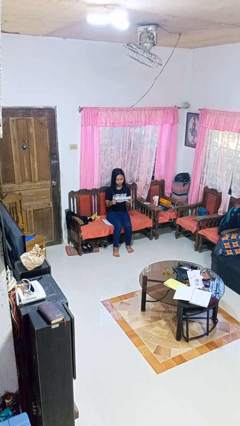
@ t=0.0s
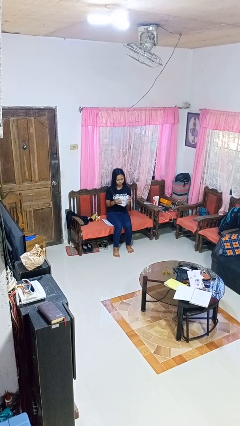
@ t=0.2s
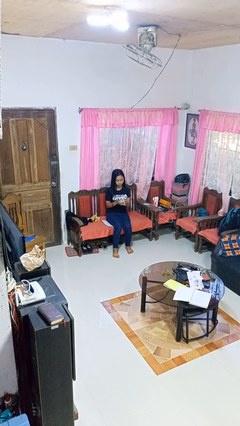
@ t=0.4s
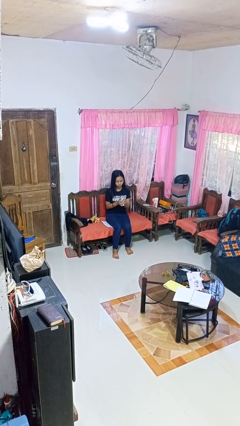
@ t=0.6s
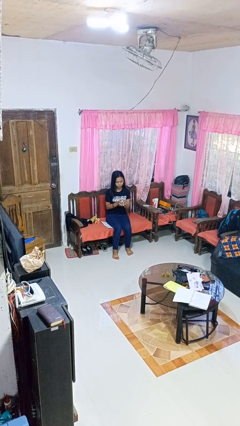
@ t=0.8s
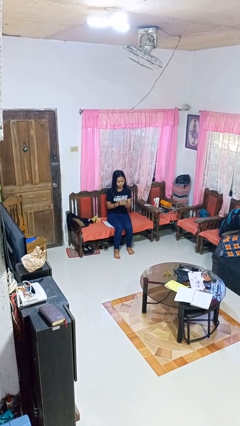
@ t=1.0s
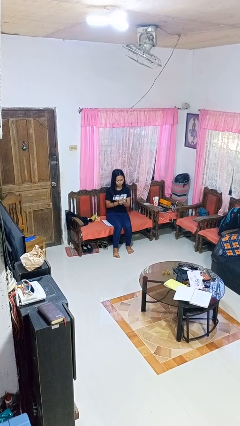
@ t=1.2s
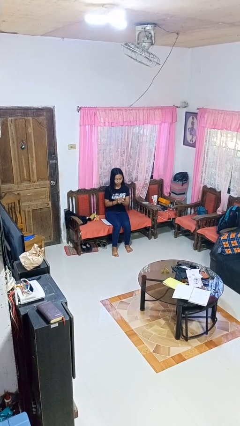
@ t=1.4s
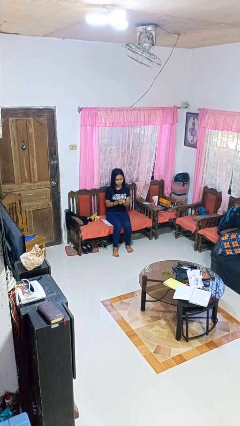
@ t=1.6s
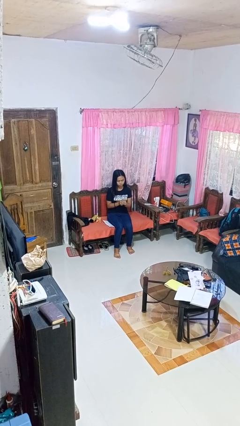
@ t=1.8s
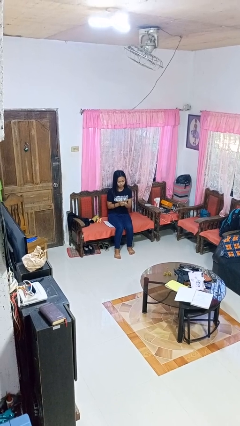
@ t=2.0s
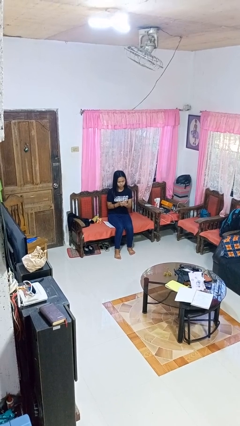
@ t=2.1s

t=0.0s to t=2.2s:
person crumples paper

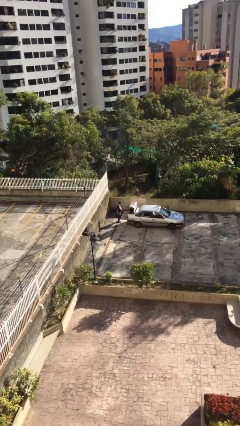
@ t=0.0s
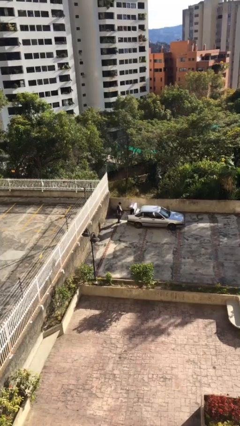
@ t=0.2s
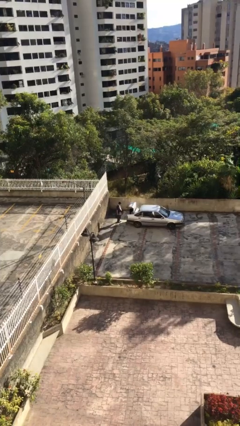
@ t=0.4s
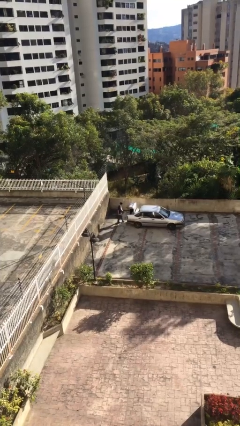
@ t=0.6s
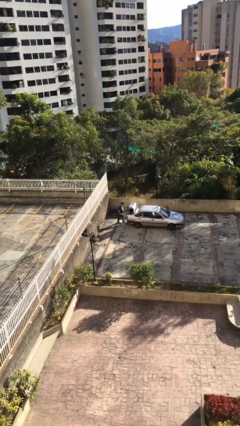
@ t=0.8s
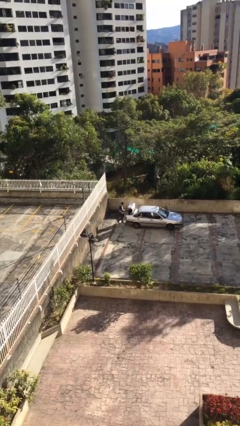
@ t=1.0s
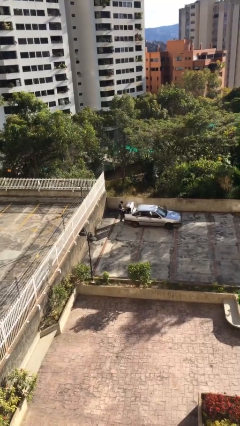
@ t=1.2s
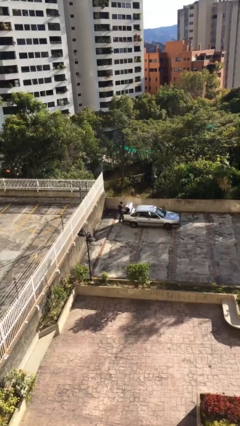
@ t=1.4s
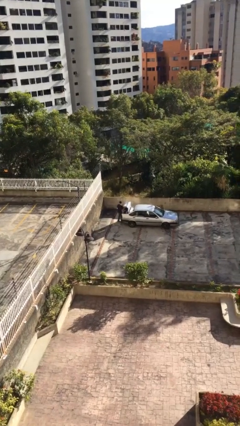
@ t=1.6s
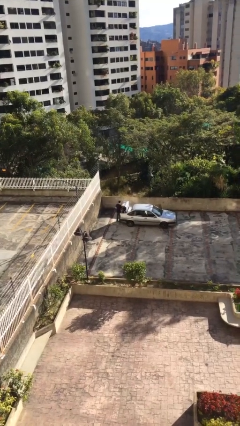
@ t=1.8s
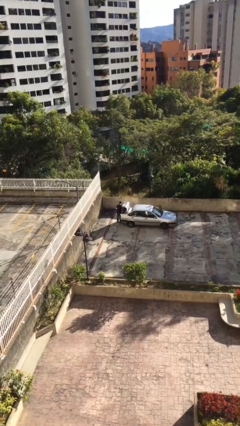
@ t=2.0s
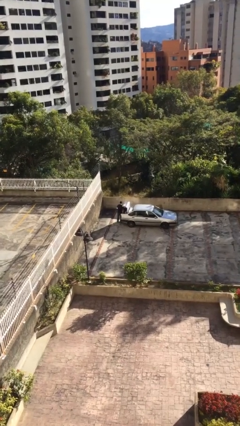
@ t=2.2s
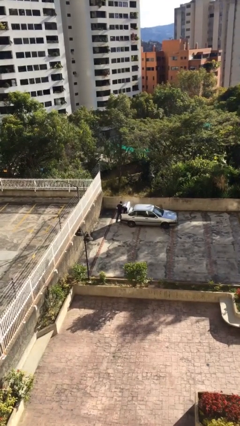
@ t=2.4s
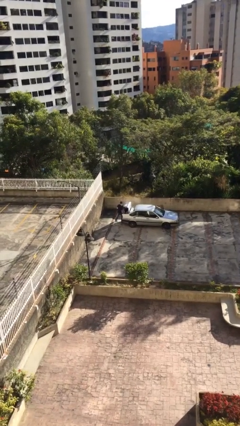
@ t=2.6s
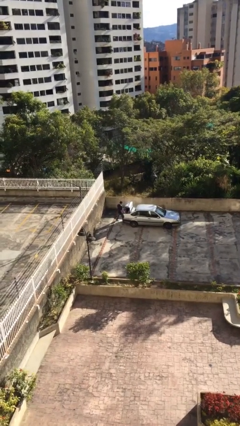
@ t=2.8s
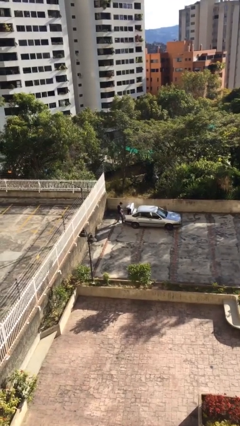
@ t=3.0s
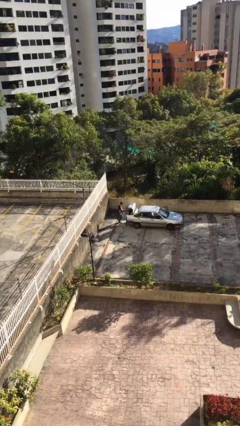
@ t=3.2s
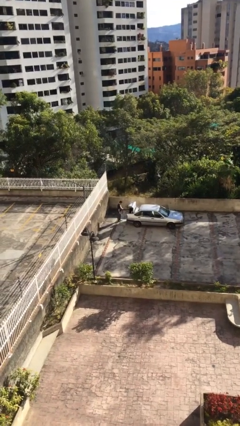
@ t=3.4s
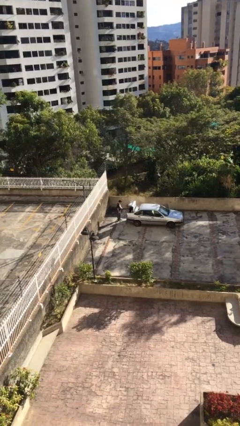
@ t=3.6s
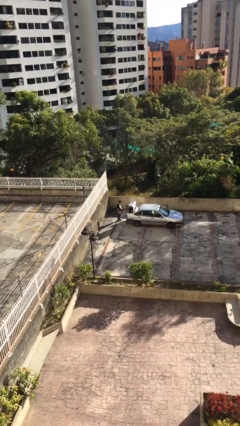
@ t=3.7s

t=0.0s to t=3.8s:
person loads car

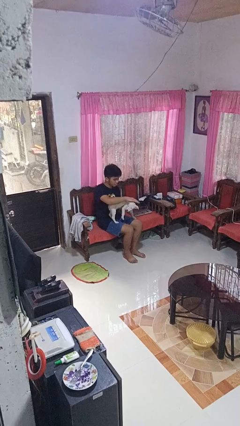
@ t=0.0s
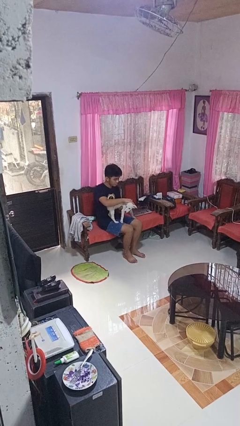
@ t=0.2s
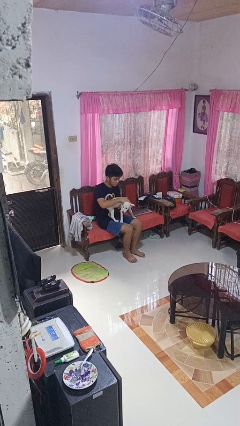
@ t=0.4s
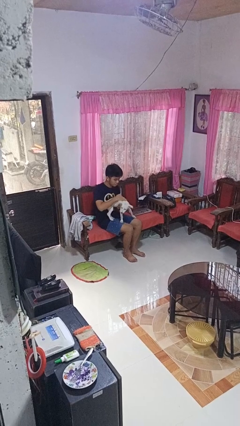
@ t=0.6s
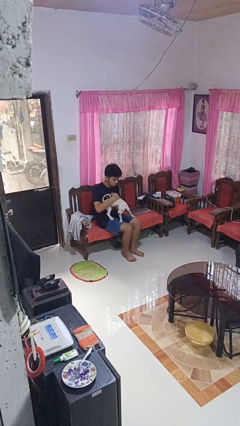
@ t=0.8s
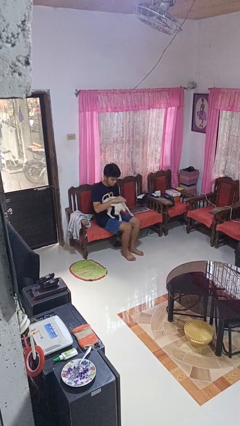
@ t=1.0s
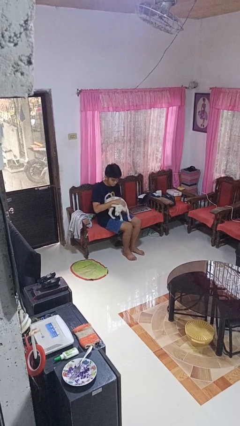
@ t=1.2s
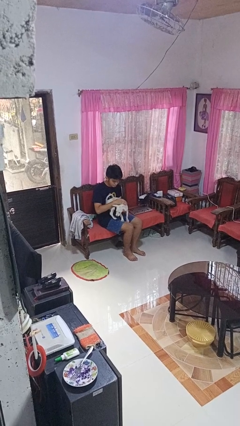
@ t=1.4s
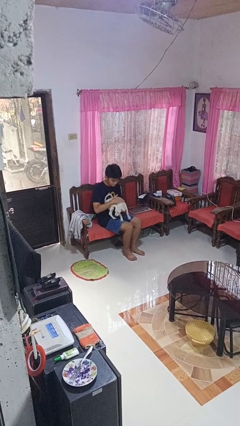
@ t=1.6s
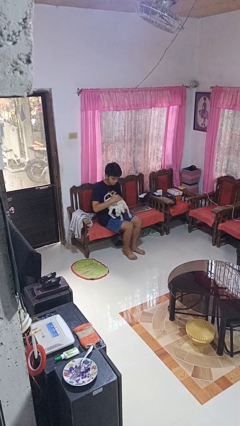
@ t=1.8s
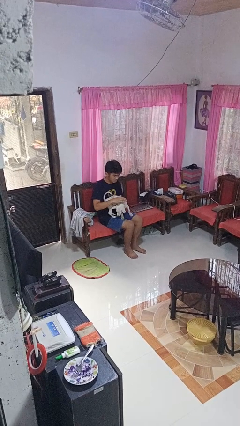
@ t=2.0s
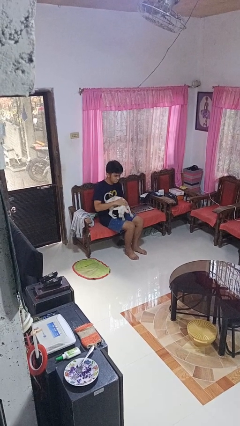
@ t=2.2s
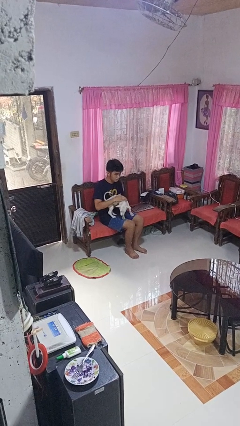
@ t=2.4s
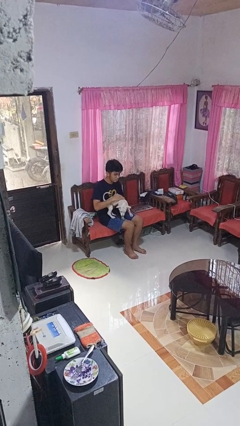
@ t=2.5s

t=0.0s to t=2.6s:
person pets dog

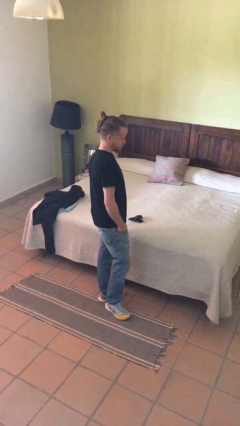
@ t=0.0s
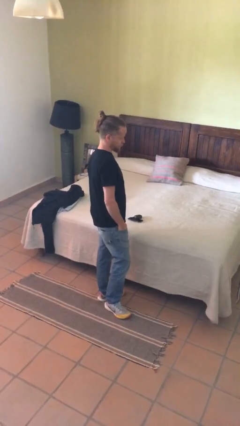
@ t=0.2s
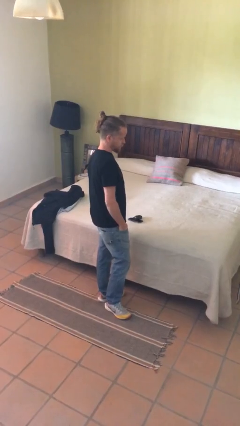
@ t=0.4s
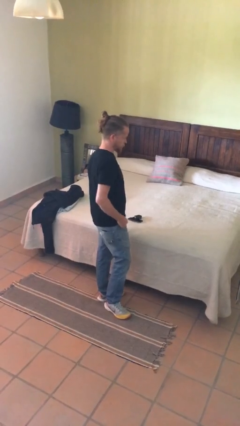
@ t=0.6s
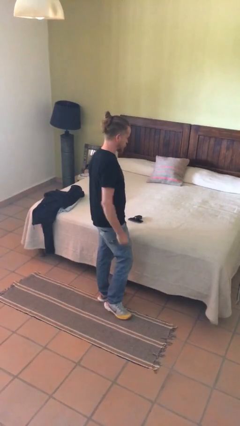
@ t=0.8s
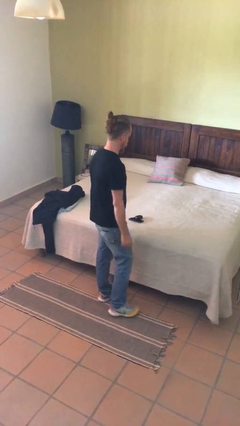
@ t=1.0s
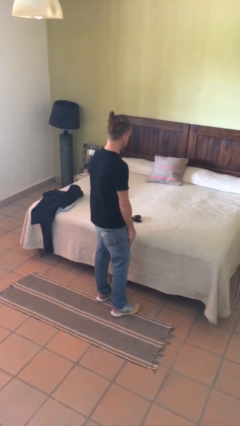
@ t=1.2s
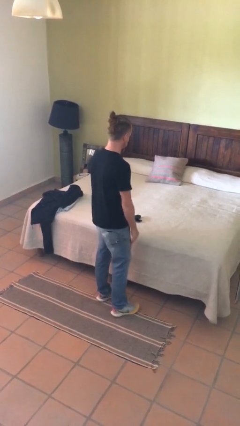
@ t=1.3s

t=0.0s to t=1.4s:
person puts hands in back pockets

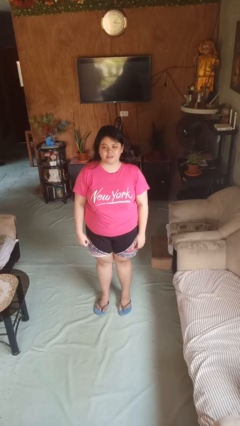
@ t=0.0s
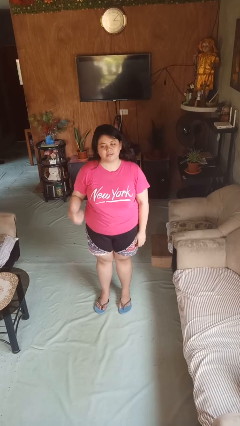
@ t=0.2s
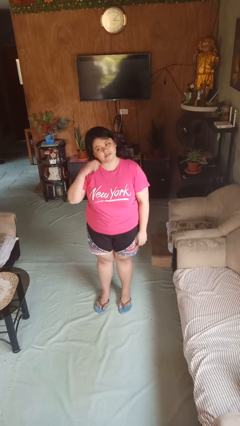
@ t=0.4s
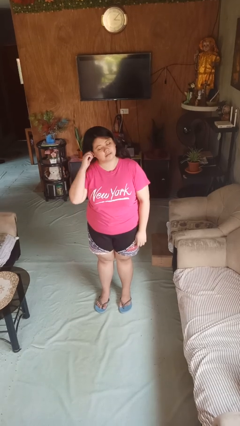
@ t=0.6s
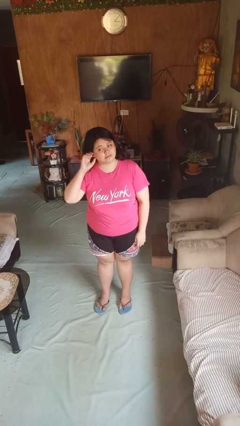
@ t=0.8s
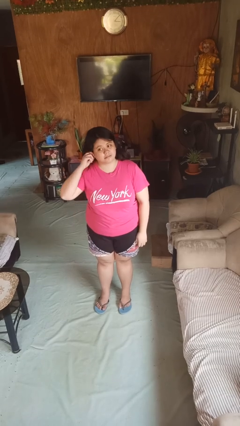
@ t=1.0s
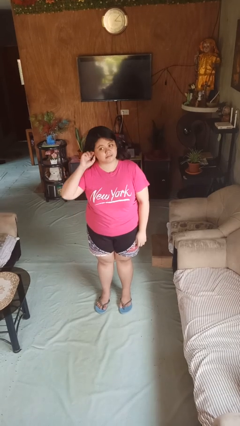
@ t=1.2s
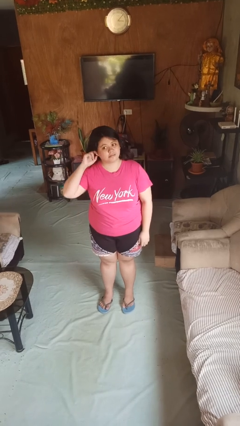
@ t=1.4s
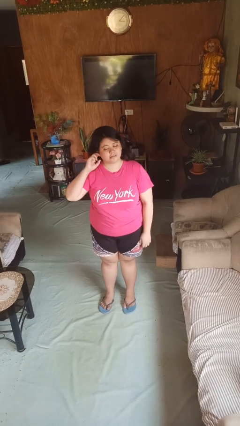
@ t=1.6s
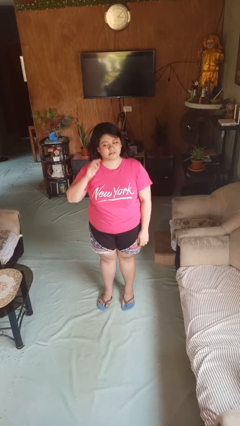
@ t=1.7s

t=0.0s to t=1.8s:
person touches earlobe

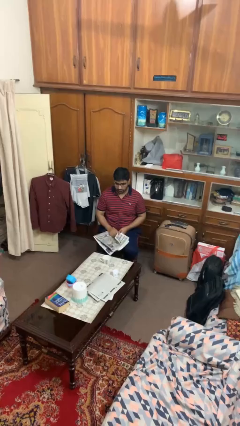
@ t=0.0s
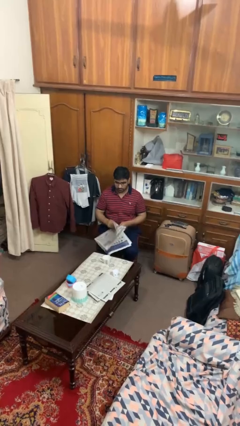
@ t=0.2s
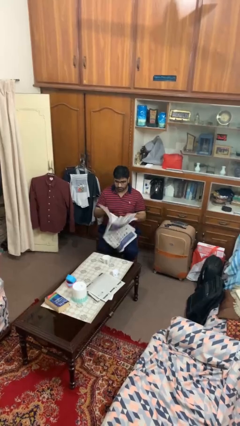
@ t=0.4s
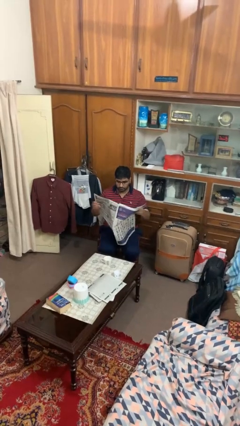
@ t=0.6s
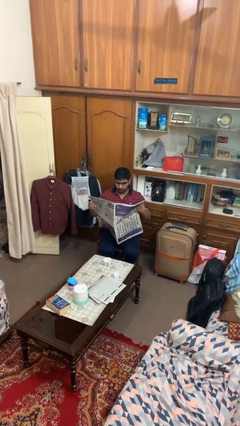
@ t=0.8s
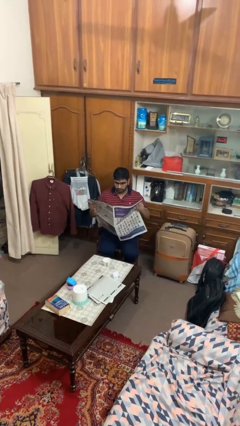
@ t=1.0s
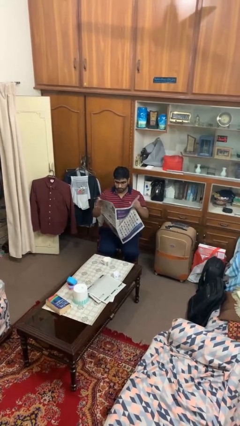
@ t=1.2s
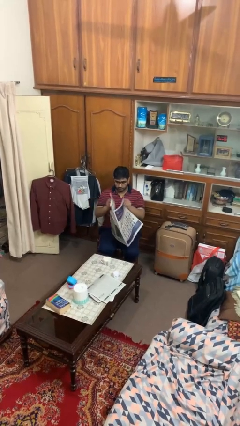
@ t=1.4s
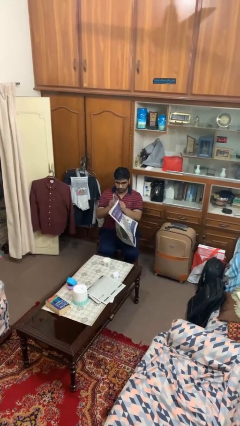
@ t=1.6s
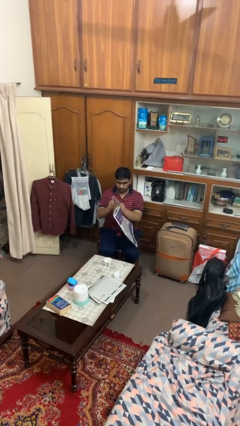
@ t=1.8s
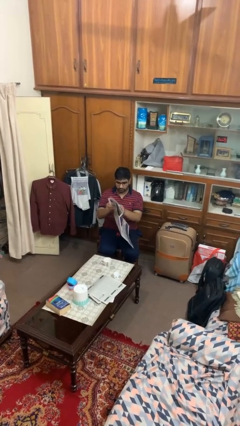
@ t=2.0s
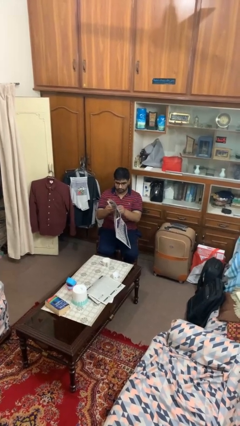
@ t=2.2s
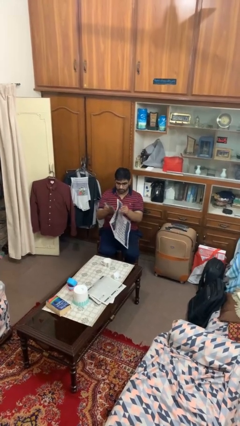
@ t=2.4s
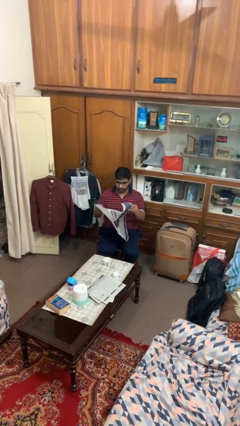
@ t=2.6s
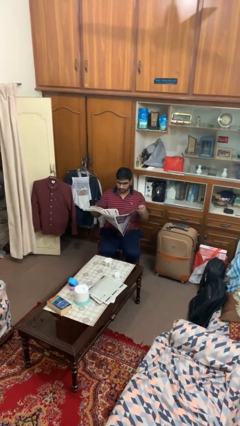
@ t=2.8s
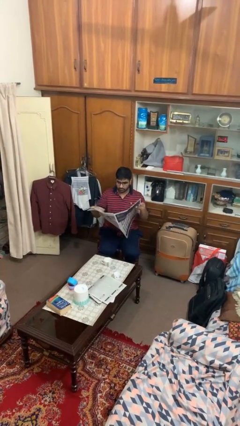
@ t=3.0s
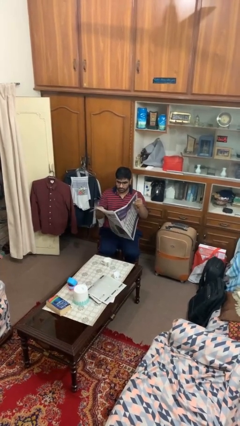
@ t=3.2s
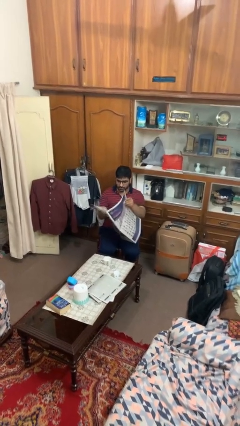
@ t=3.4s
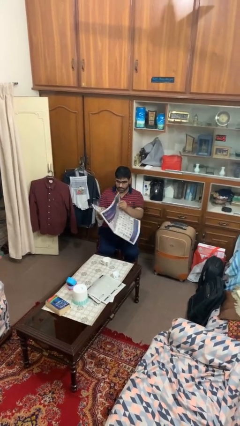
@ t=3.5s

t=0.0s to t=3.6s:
person reads newspaper

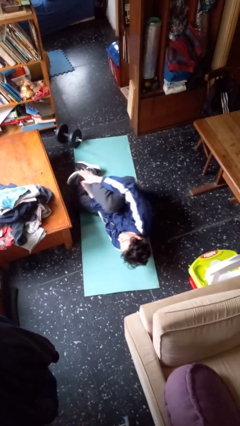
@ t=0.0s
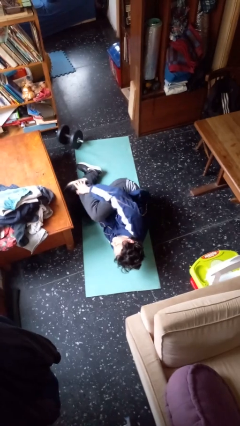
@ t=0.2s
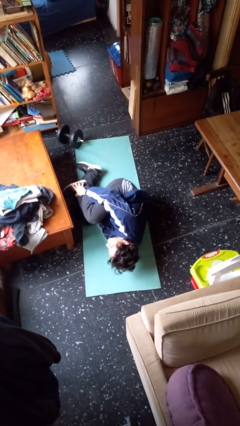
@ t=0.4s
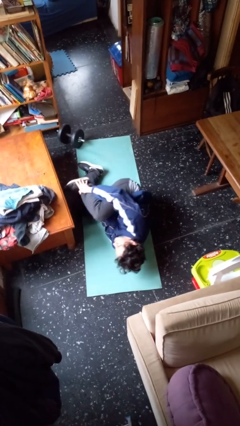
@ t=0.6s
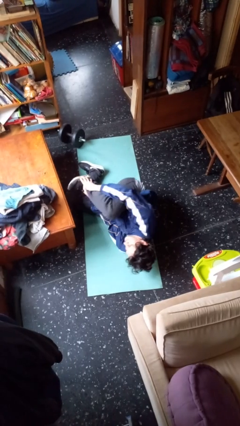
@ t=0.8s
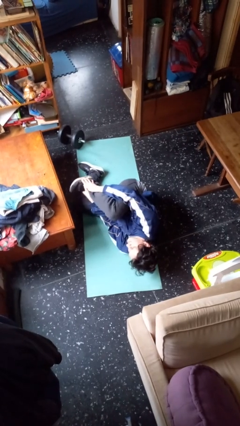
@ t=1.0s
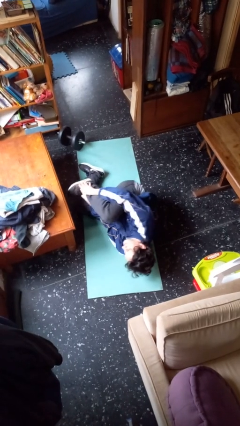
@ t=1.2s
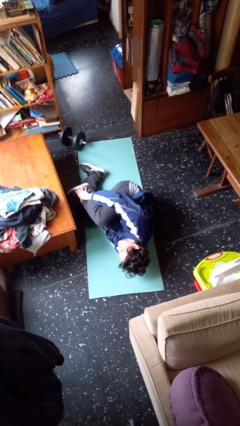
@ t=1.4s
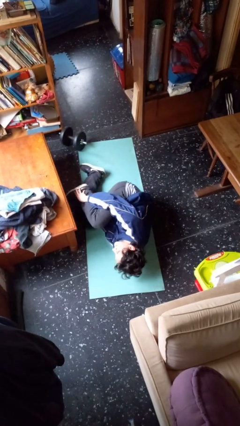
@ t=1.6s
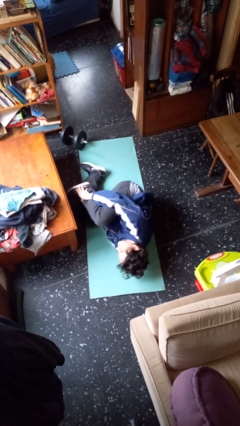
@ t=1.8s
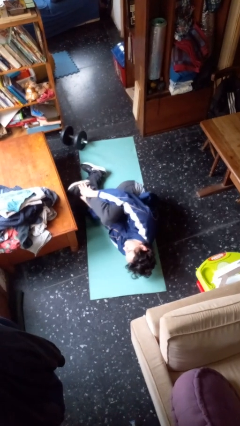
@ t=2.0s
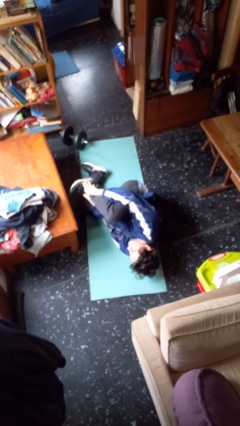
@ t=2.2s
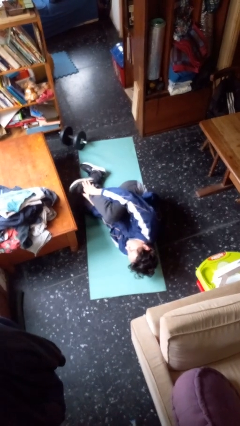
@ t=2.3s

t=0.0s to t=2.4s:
person lies down on floor
